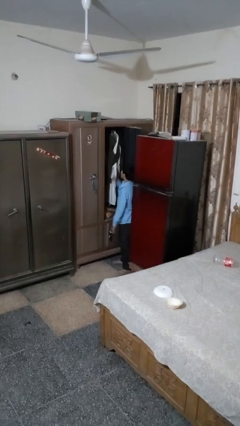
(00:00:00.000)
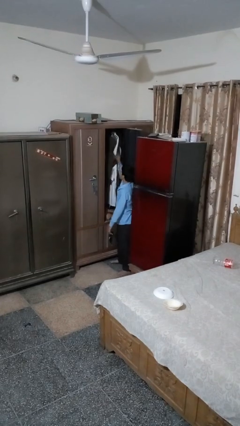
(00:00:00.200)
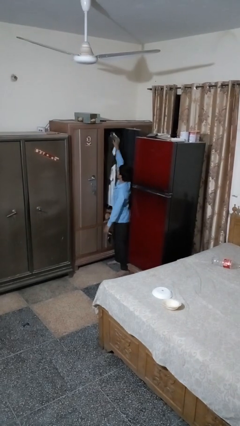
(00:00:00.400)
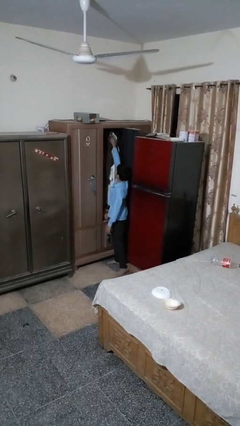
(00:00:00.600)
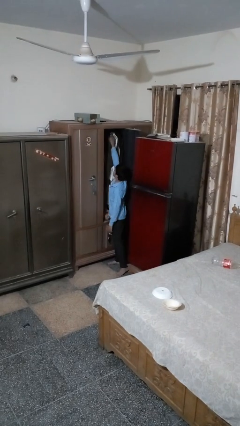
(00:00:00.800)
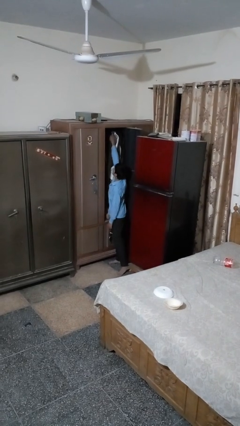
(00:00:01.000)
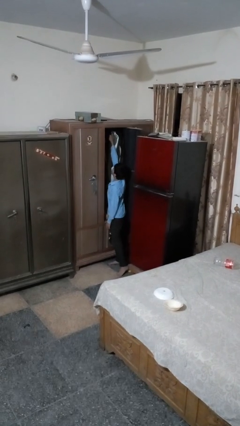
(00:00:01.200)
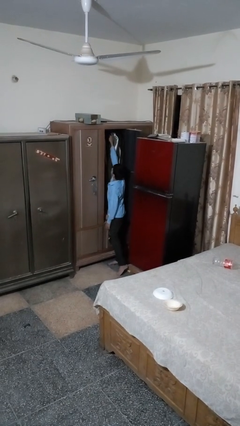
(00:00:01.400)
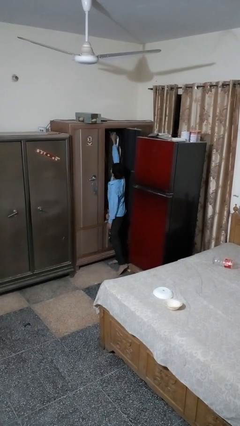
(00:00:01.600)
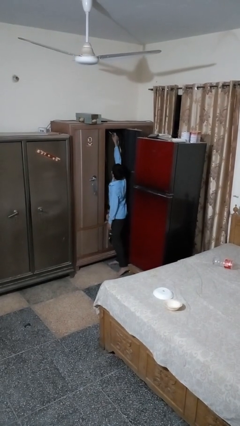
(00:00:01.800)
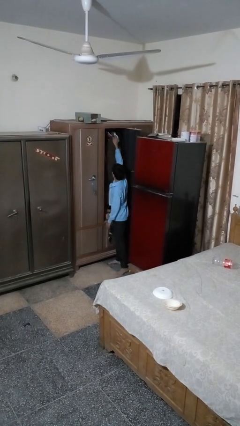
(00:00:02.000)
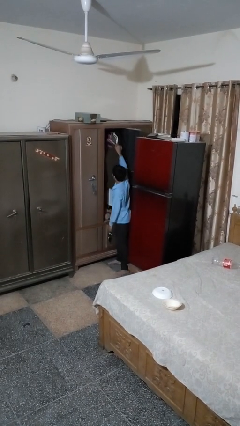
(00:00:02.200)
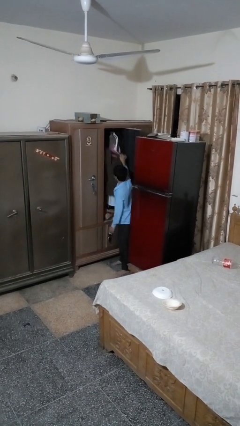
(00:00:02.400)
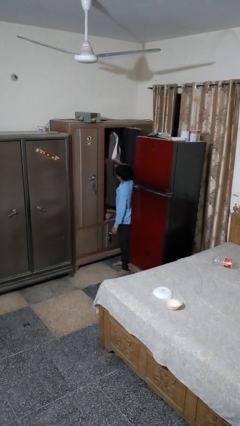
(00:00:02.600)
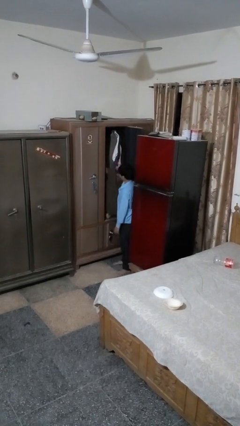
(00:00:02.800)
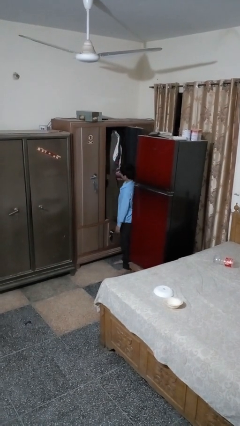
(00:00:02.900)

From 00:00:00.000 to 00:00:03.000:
person takes clothes from closet

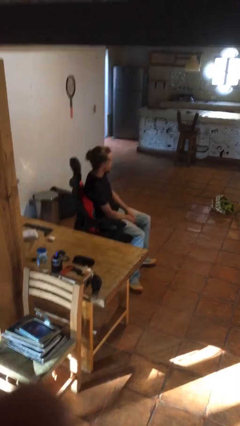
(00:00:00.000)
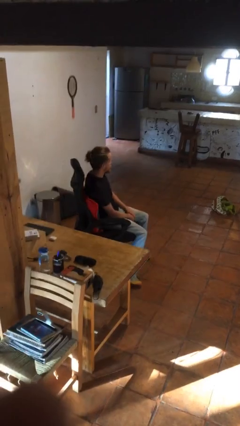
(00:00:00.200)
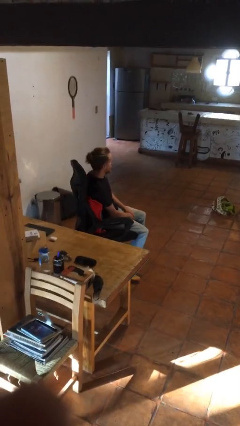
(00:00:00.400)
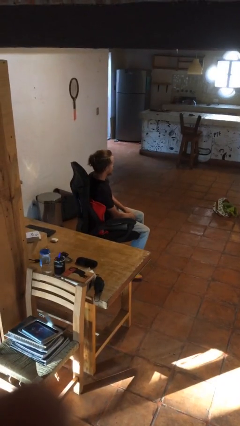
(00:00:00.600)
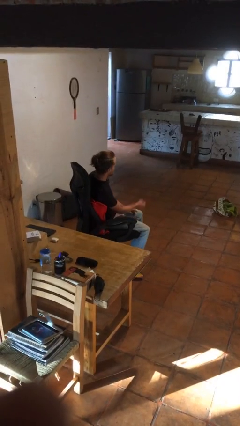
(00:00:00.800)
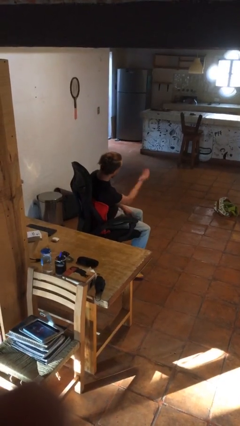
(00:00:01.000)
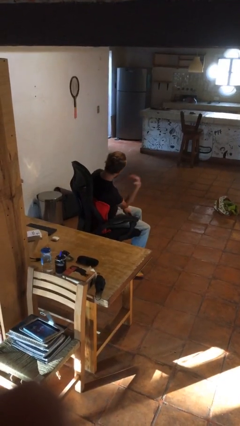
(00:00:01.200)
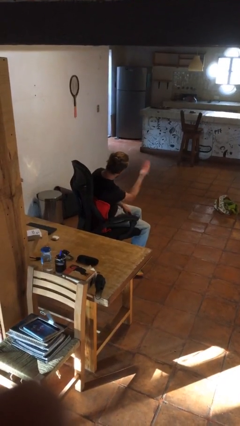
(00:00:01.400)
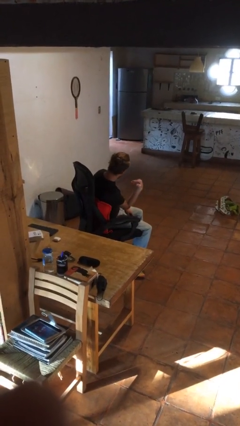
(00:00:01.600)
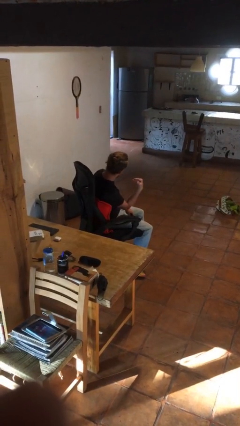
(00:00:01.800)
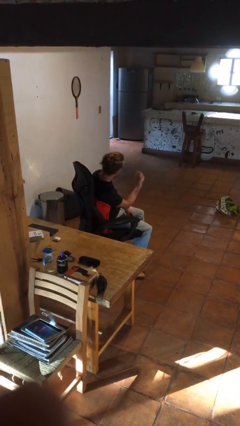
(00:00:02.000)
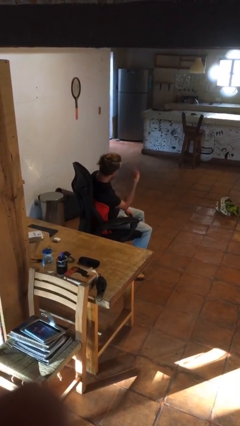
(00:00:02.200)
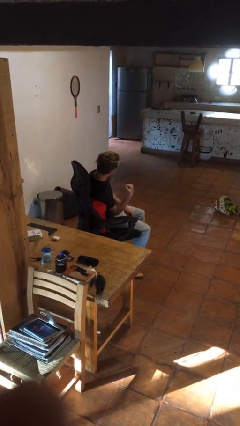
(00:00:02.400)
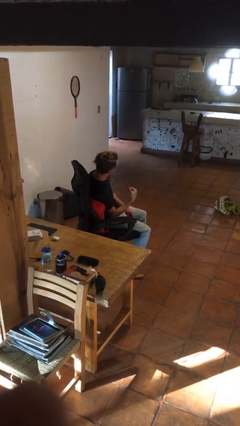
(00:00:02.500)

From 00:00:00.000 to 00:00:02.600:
person gestures come here

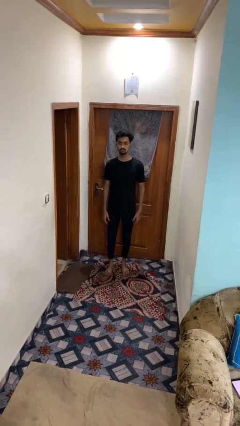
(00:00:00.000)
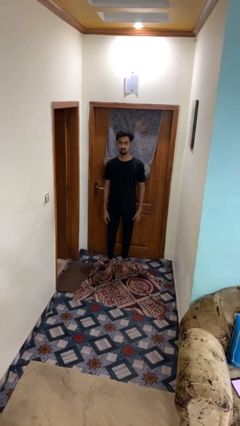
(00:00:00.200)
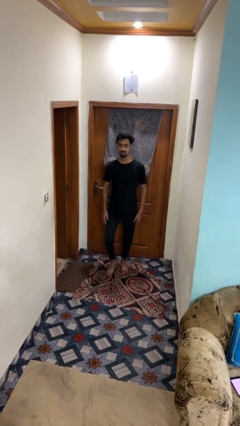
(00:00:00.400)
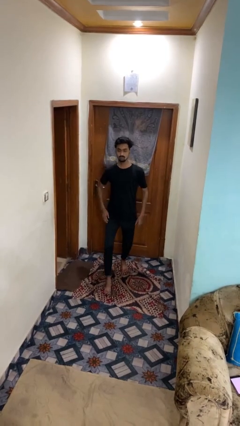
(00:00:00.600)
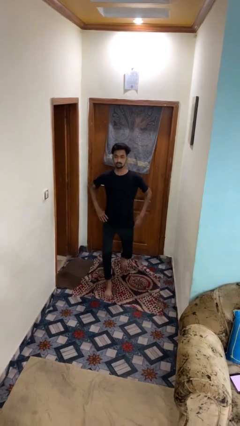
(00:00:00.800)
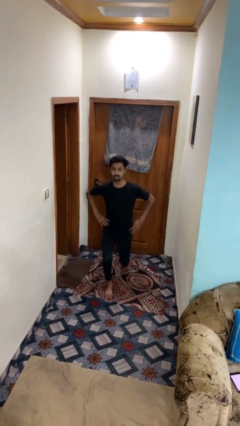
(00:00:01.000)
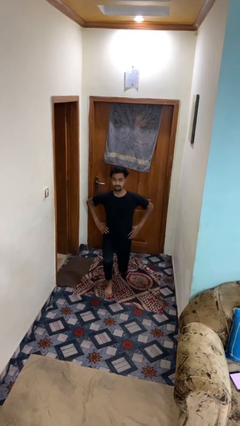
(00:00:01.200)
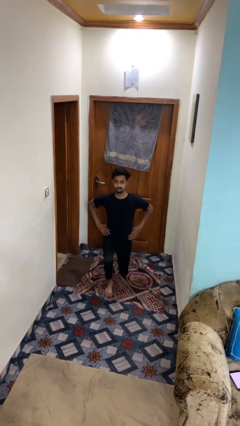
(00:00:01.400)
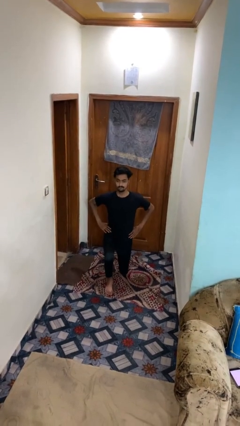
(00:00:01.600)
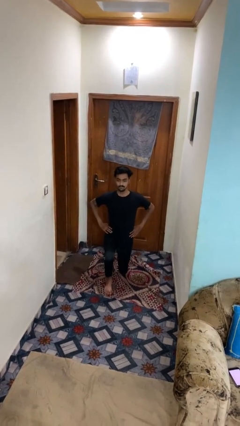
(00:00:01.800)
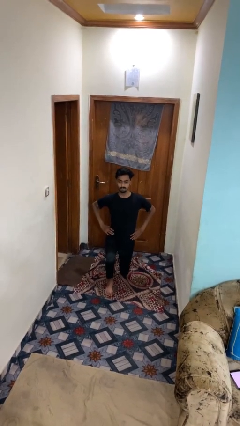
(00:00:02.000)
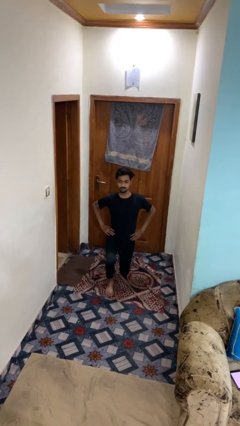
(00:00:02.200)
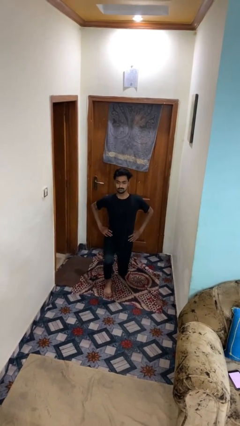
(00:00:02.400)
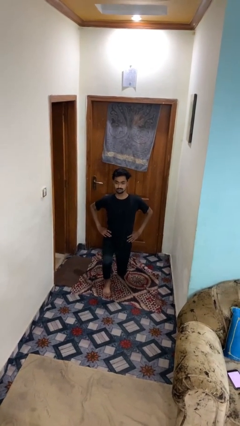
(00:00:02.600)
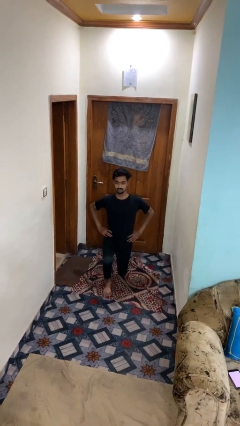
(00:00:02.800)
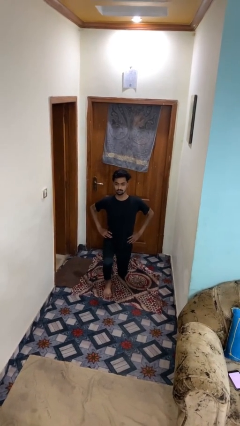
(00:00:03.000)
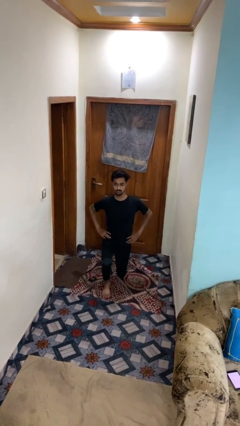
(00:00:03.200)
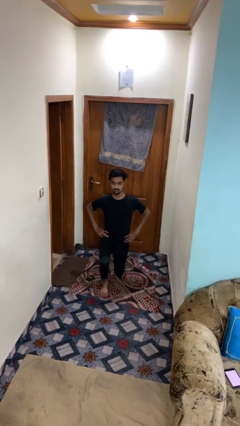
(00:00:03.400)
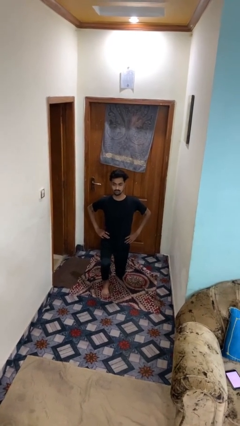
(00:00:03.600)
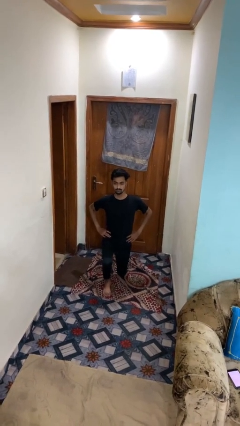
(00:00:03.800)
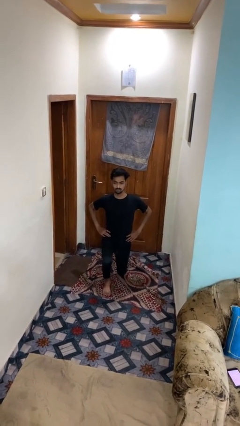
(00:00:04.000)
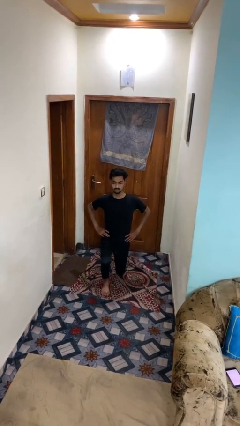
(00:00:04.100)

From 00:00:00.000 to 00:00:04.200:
person exercises with lunges

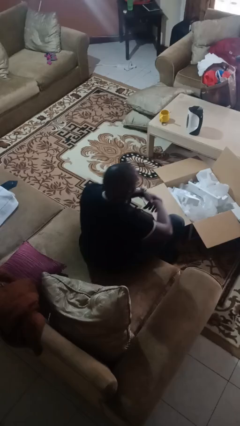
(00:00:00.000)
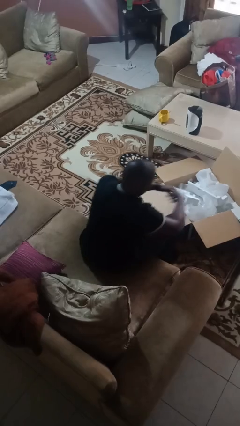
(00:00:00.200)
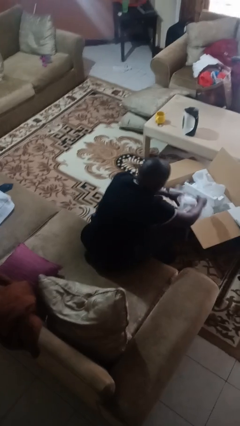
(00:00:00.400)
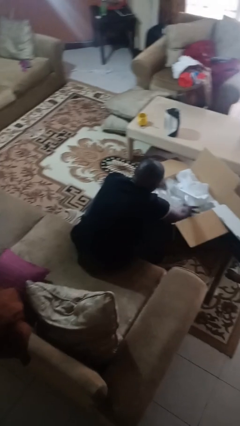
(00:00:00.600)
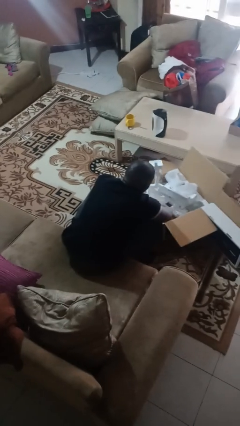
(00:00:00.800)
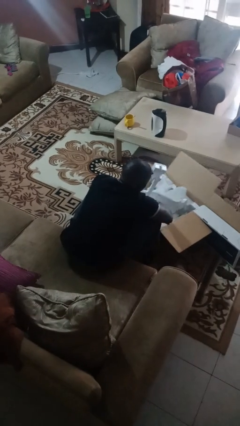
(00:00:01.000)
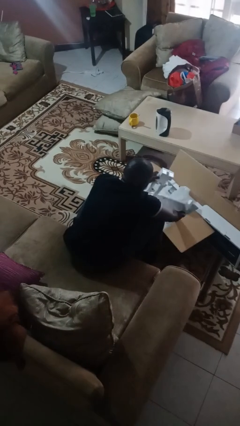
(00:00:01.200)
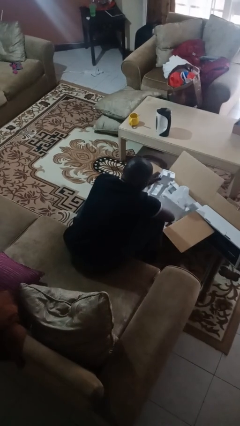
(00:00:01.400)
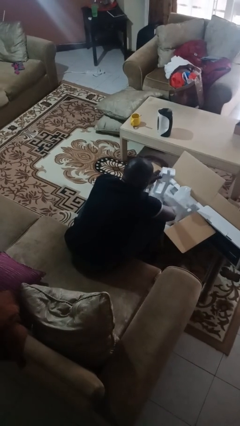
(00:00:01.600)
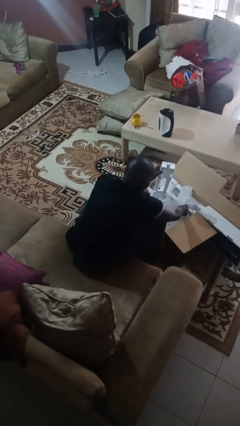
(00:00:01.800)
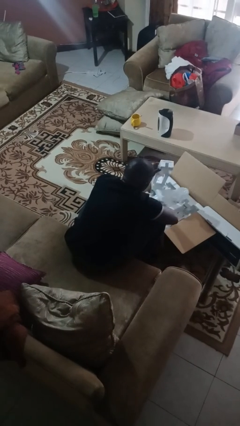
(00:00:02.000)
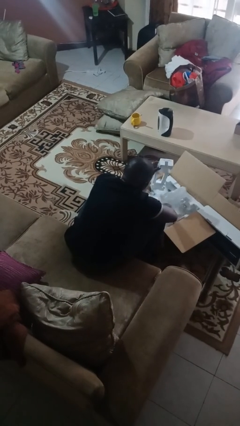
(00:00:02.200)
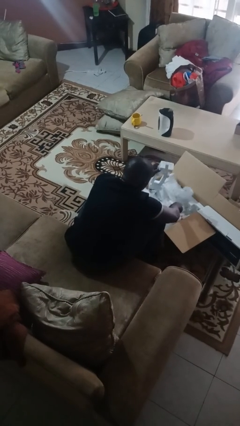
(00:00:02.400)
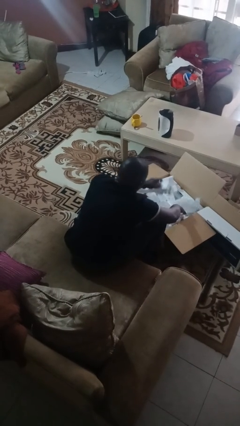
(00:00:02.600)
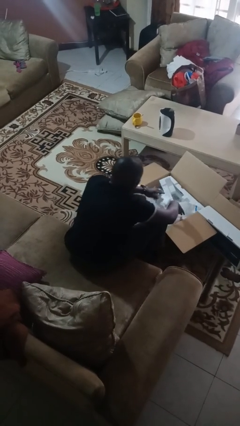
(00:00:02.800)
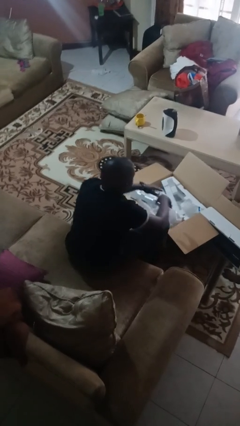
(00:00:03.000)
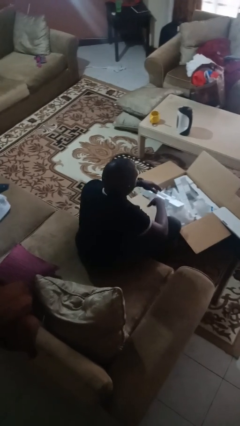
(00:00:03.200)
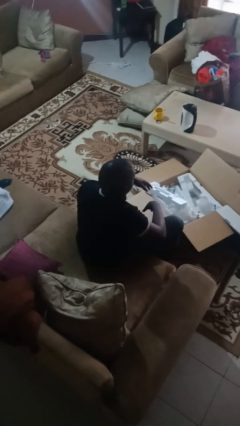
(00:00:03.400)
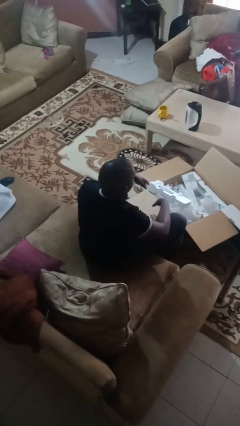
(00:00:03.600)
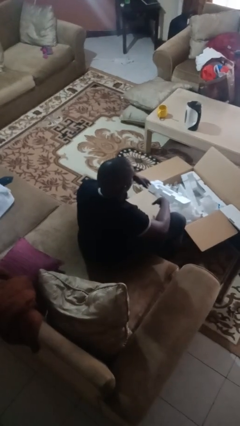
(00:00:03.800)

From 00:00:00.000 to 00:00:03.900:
person searches in box

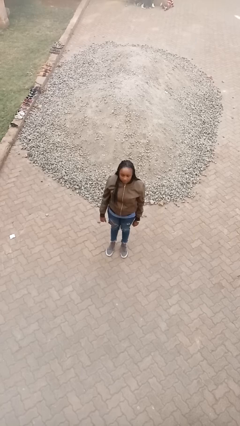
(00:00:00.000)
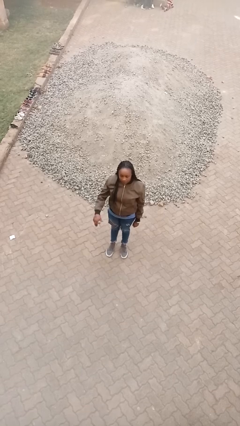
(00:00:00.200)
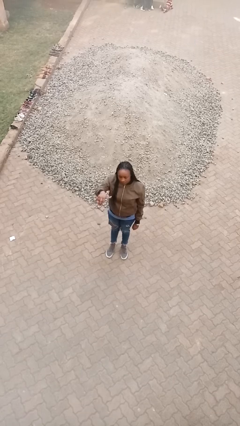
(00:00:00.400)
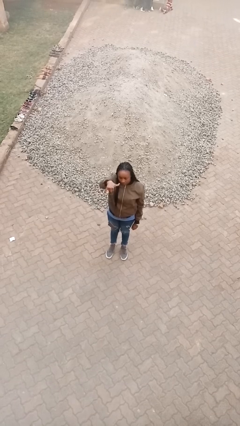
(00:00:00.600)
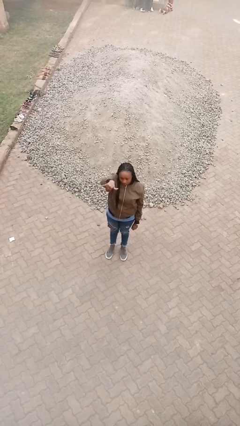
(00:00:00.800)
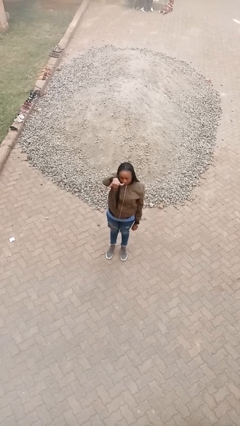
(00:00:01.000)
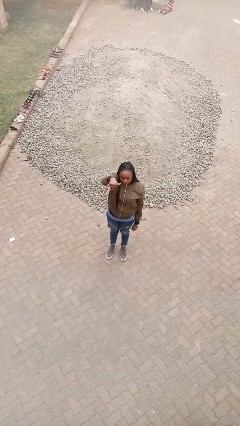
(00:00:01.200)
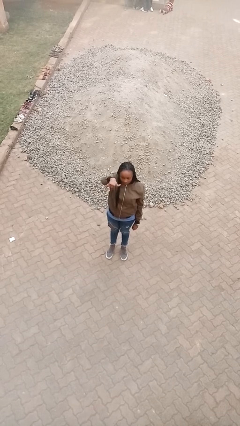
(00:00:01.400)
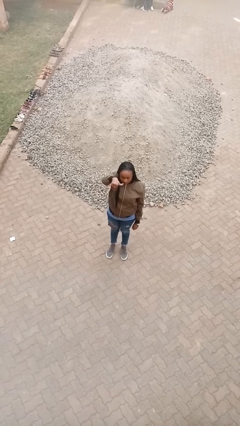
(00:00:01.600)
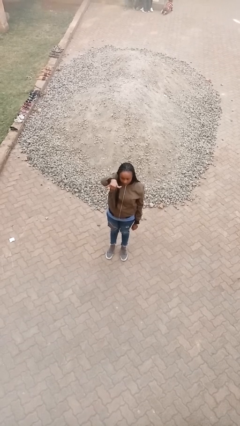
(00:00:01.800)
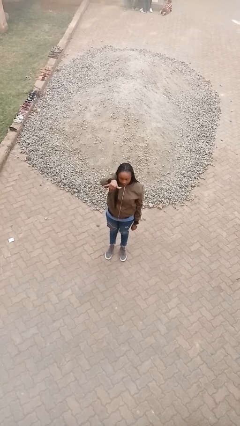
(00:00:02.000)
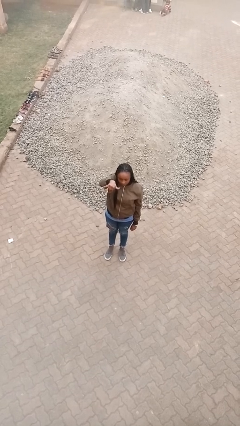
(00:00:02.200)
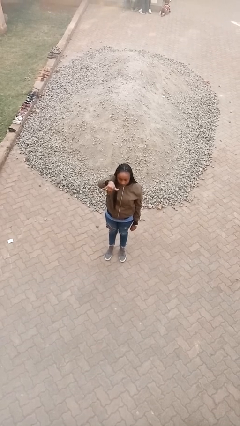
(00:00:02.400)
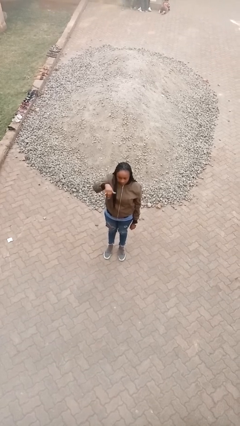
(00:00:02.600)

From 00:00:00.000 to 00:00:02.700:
person gestures hang loose

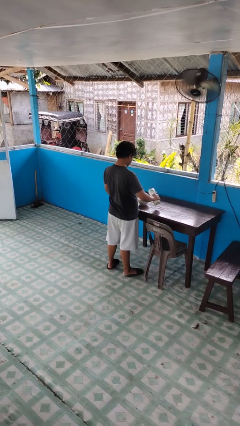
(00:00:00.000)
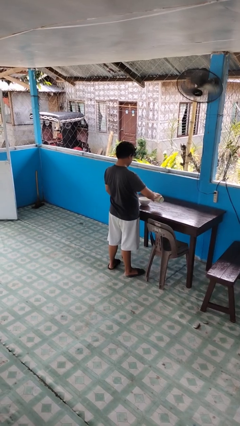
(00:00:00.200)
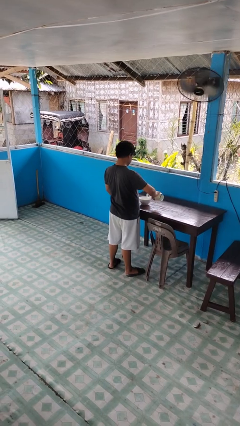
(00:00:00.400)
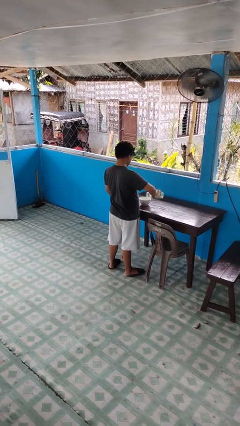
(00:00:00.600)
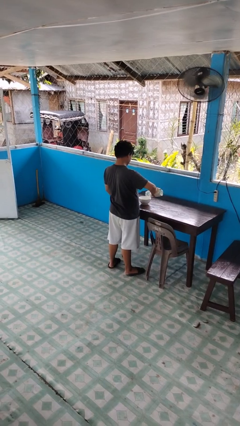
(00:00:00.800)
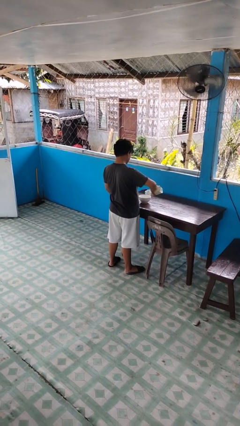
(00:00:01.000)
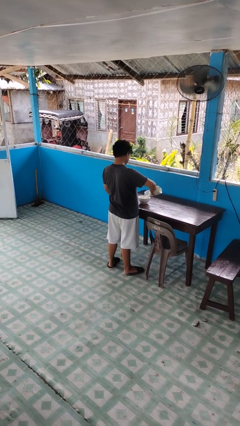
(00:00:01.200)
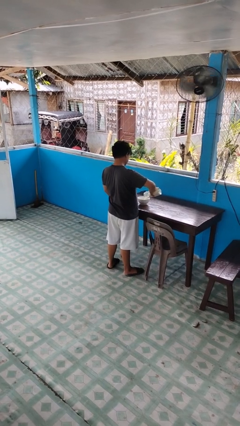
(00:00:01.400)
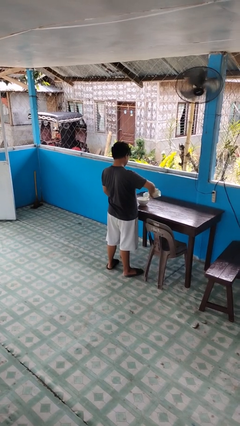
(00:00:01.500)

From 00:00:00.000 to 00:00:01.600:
person pours into bowl
